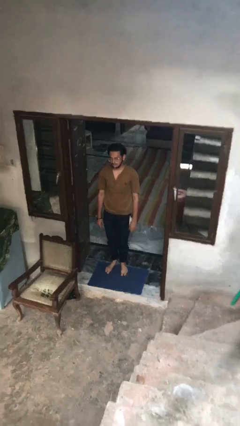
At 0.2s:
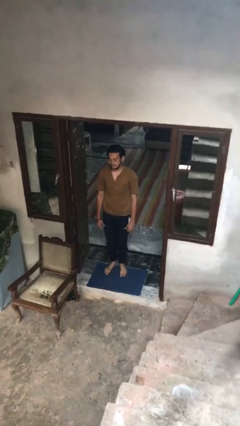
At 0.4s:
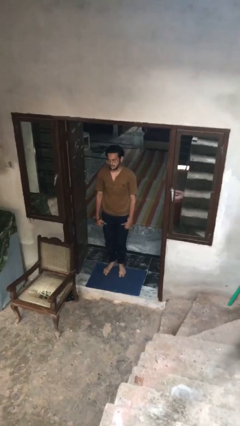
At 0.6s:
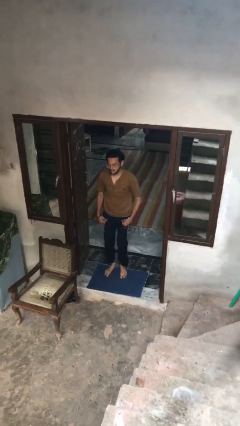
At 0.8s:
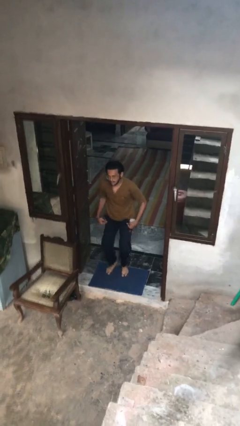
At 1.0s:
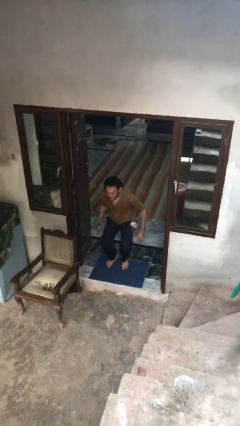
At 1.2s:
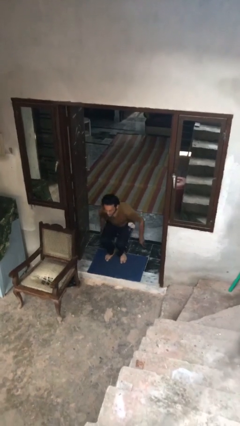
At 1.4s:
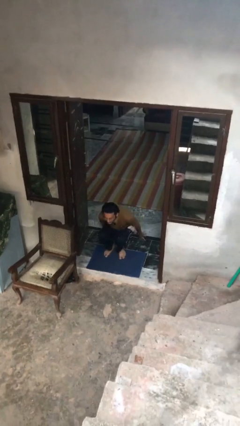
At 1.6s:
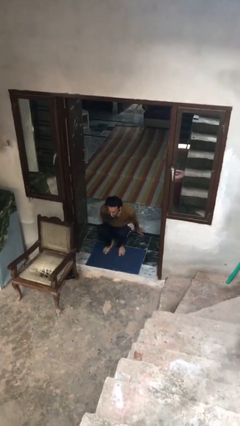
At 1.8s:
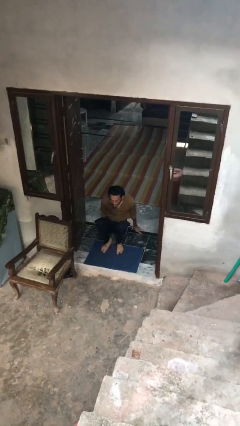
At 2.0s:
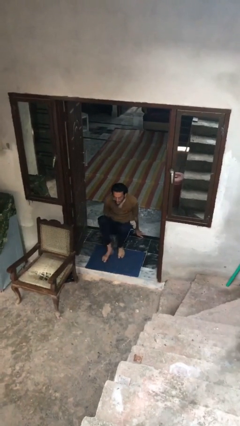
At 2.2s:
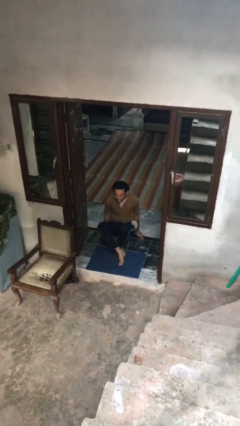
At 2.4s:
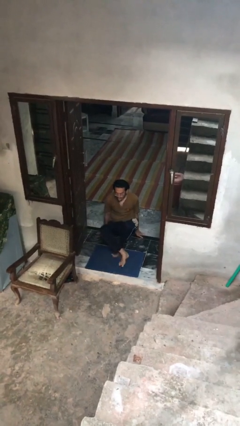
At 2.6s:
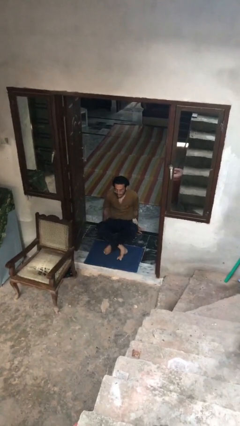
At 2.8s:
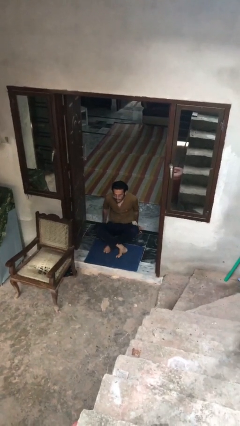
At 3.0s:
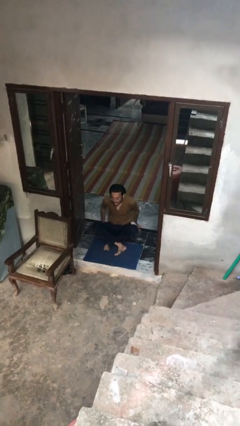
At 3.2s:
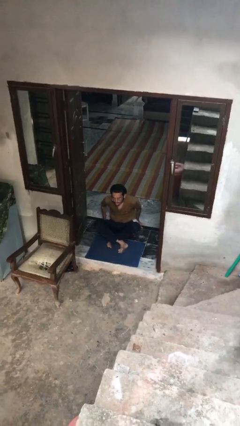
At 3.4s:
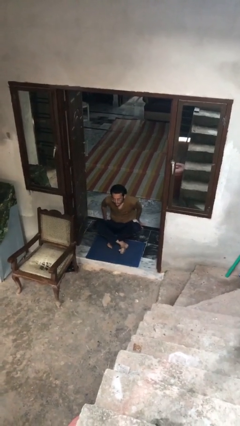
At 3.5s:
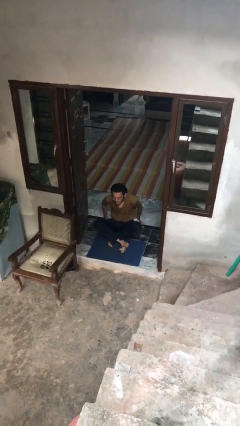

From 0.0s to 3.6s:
person sits crisscross

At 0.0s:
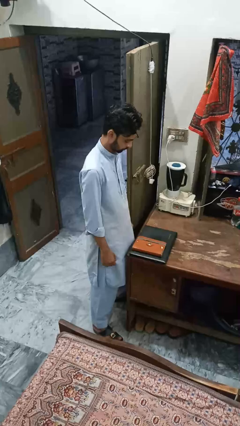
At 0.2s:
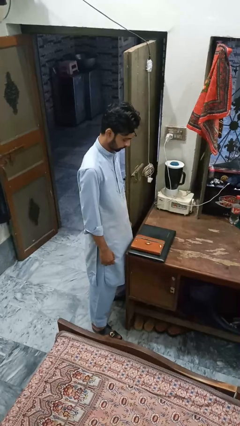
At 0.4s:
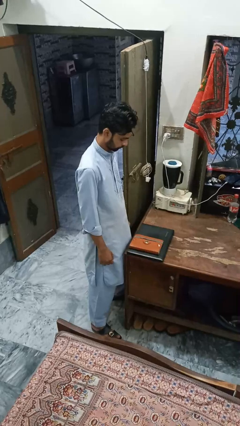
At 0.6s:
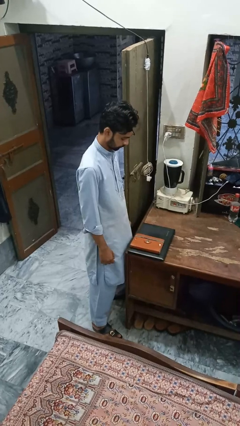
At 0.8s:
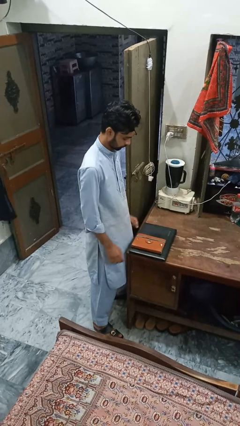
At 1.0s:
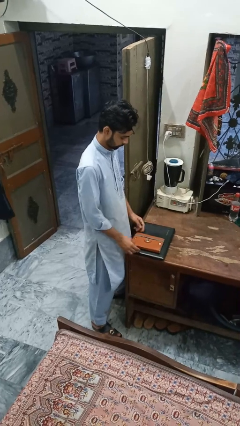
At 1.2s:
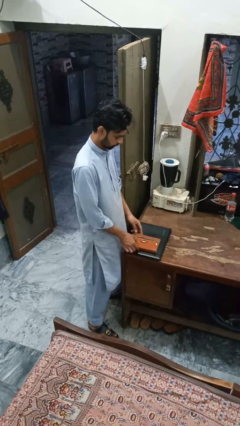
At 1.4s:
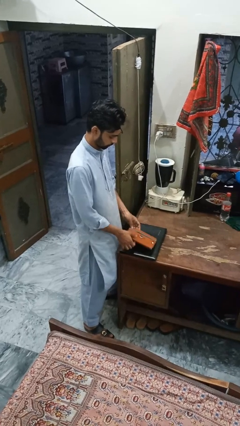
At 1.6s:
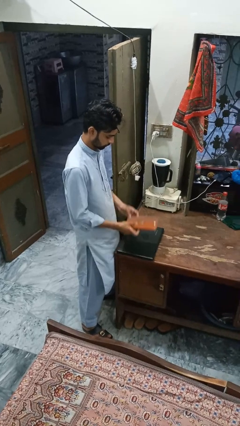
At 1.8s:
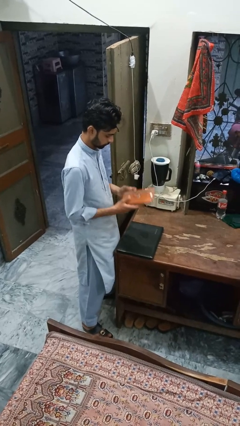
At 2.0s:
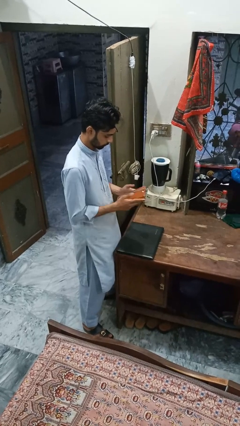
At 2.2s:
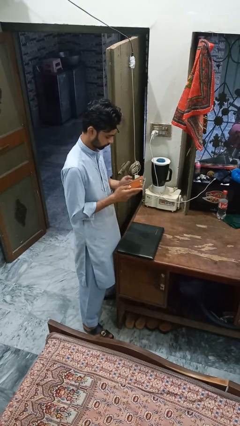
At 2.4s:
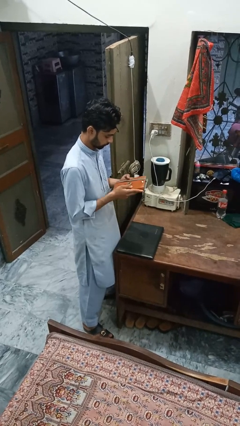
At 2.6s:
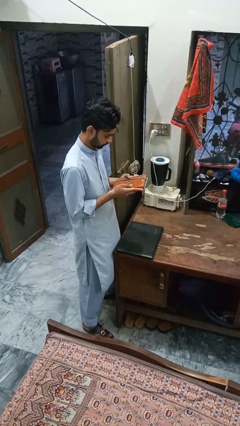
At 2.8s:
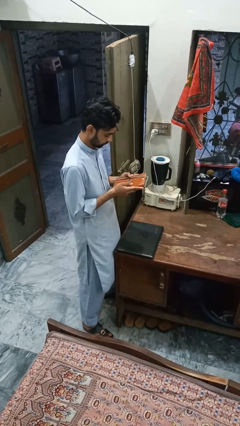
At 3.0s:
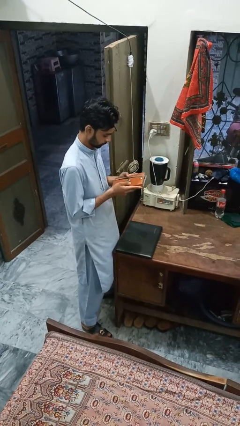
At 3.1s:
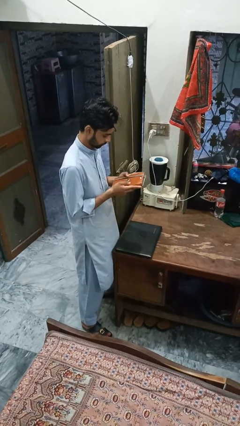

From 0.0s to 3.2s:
person picks up object from countertop

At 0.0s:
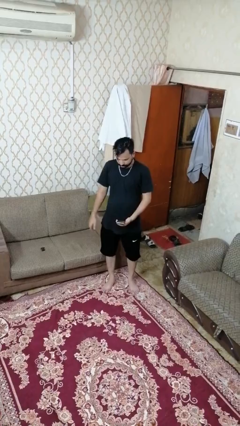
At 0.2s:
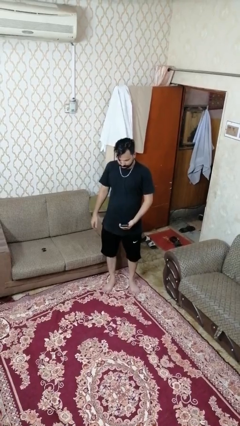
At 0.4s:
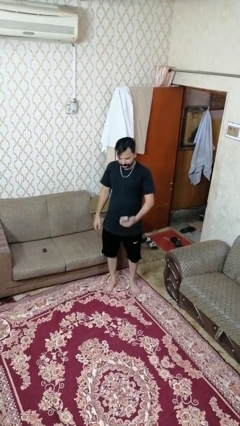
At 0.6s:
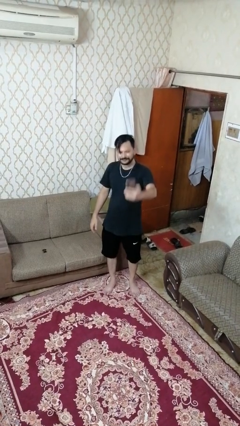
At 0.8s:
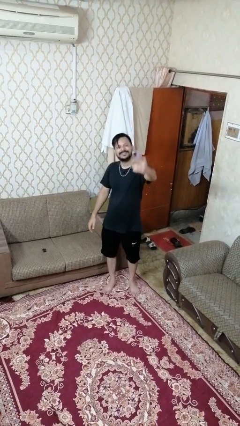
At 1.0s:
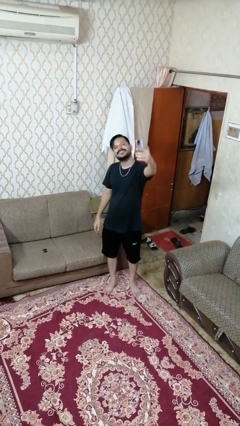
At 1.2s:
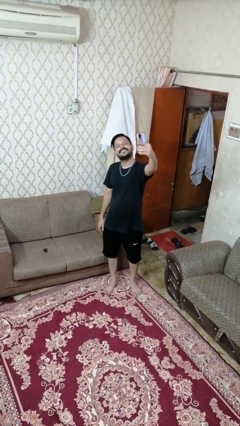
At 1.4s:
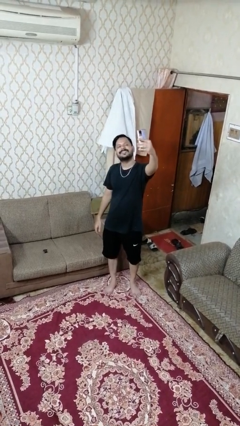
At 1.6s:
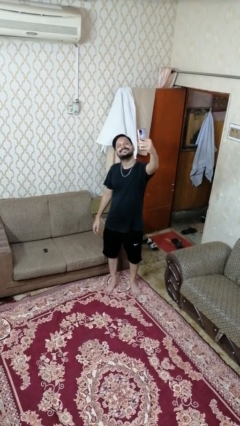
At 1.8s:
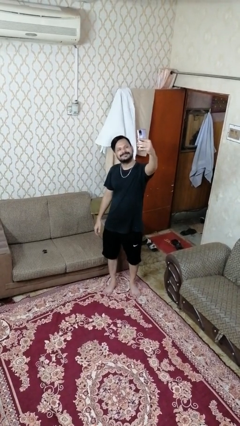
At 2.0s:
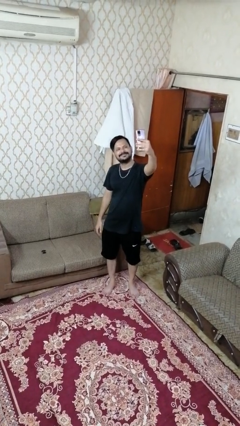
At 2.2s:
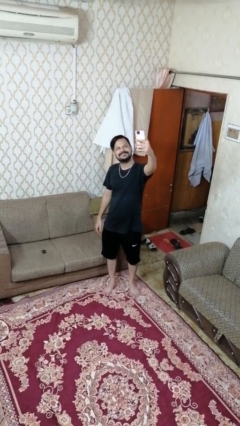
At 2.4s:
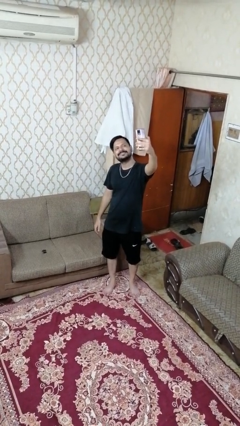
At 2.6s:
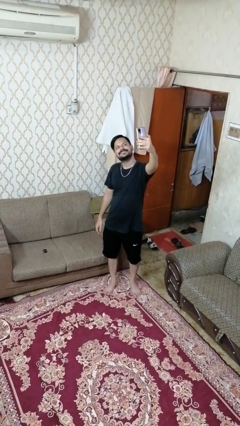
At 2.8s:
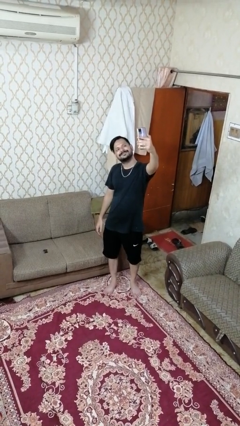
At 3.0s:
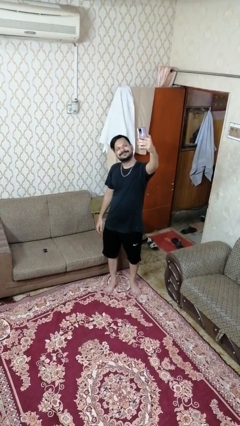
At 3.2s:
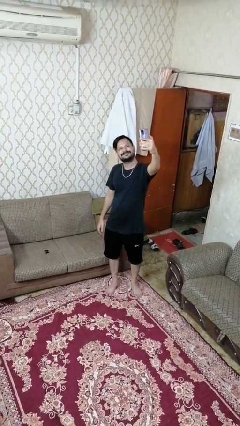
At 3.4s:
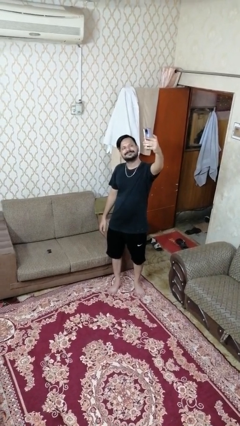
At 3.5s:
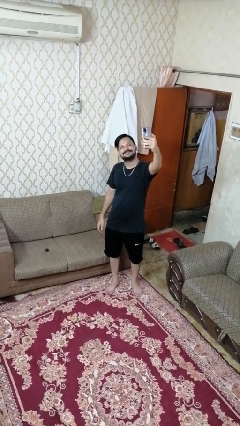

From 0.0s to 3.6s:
person takes selfie

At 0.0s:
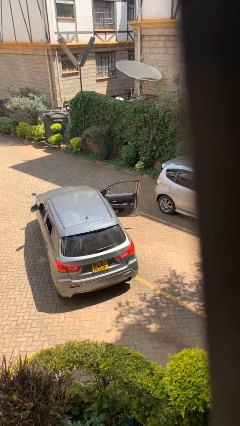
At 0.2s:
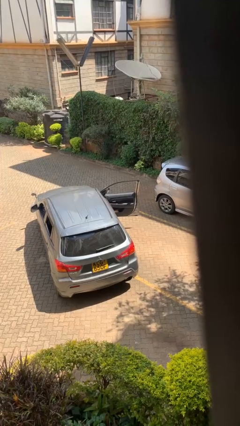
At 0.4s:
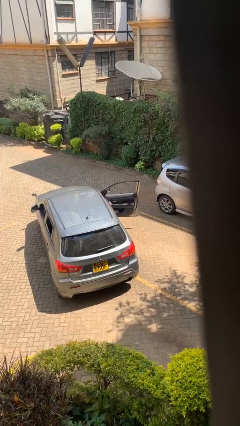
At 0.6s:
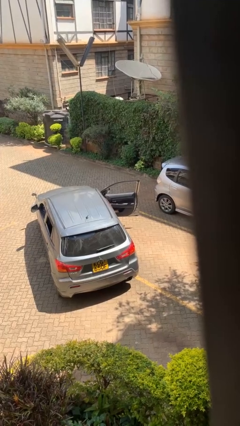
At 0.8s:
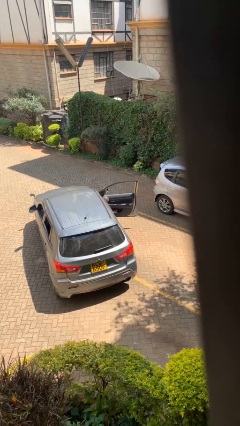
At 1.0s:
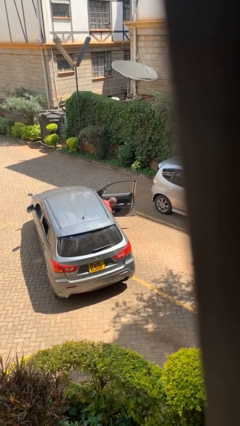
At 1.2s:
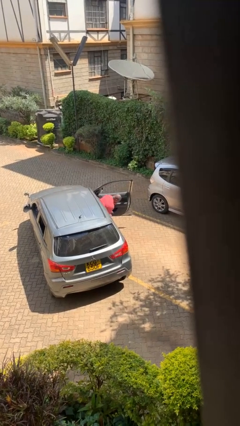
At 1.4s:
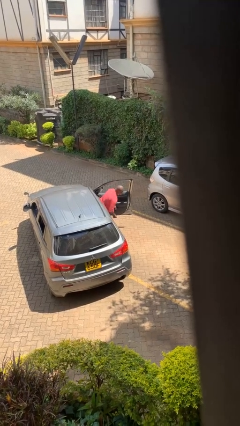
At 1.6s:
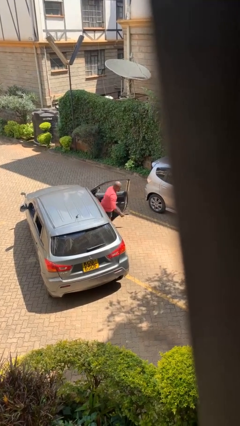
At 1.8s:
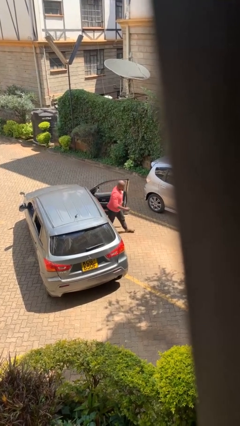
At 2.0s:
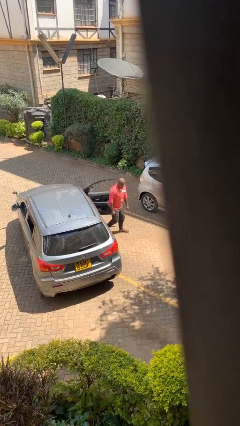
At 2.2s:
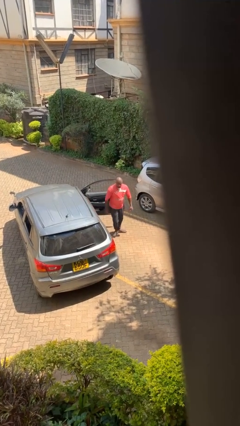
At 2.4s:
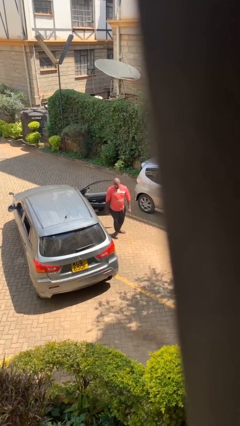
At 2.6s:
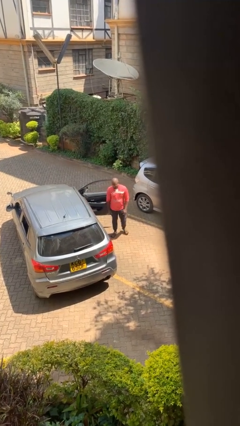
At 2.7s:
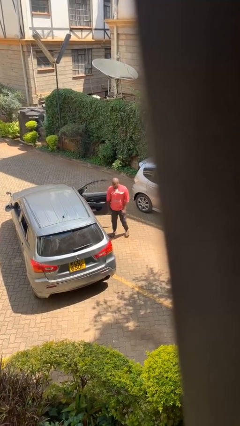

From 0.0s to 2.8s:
person exits car

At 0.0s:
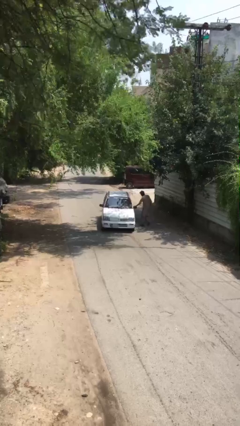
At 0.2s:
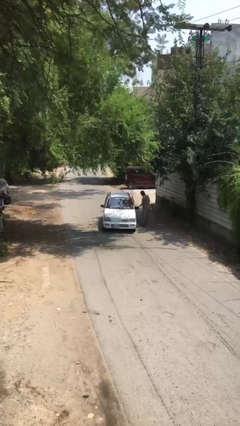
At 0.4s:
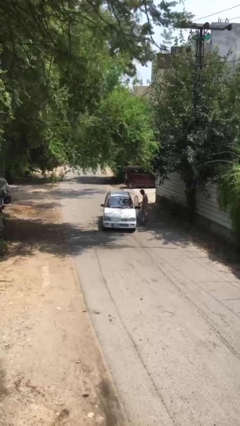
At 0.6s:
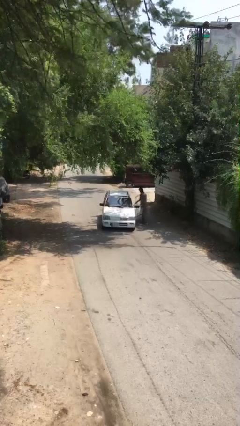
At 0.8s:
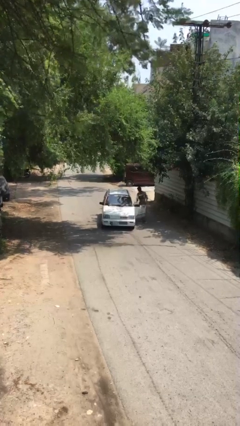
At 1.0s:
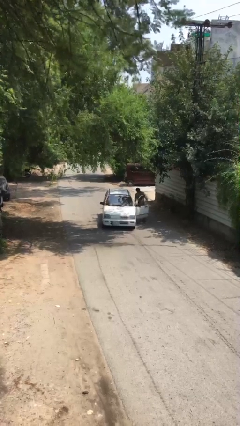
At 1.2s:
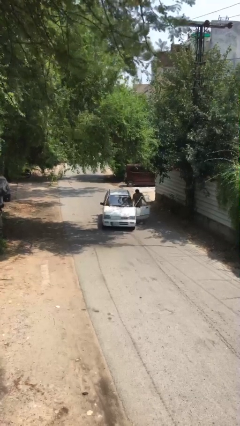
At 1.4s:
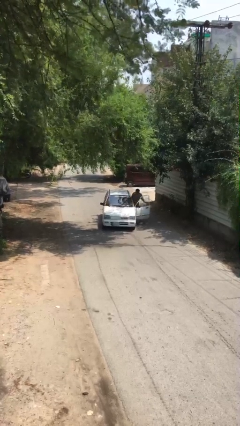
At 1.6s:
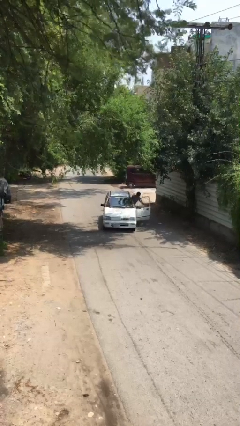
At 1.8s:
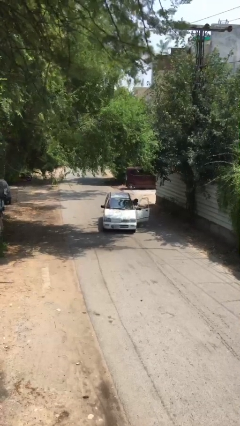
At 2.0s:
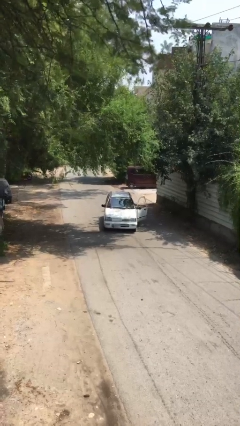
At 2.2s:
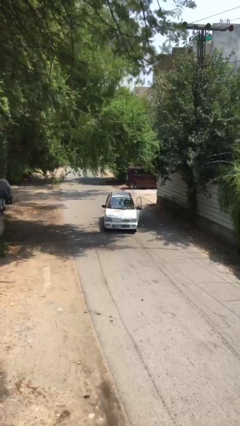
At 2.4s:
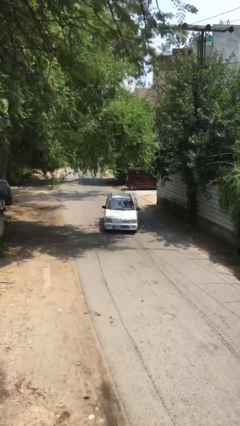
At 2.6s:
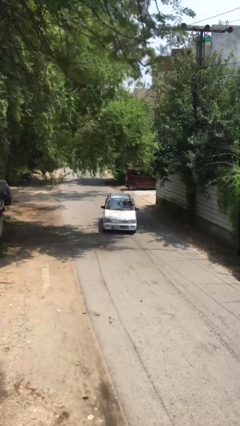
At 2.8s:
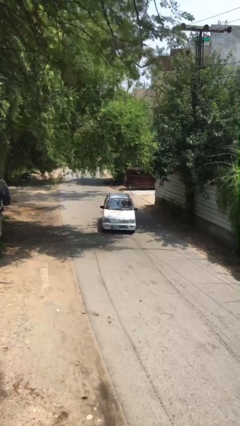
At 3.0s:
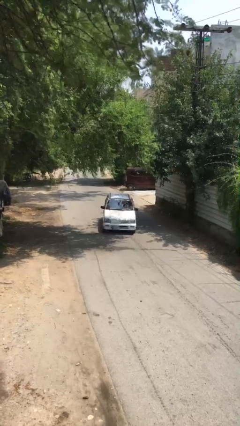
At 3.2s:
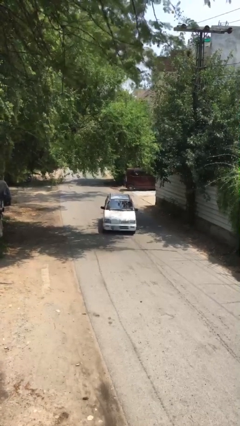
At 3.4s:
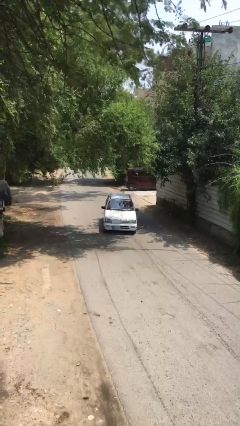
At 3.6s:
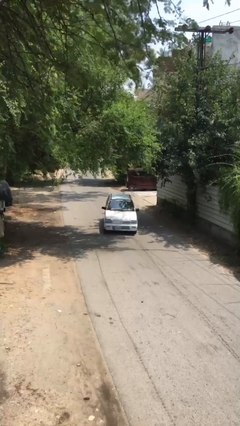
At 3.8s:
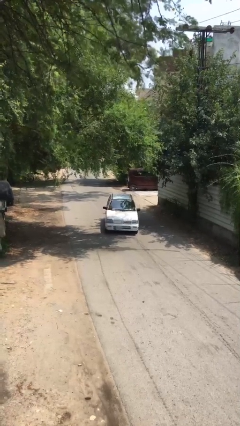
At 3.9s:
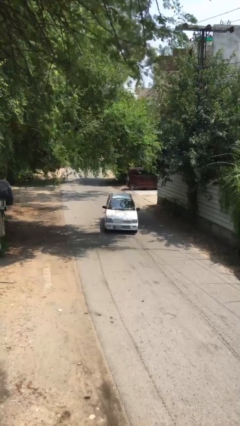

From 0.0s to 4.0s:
car picks up person

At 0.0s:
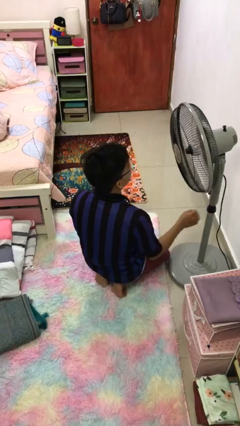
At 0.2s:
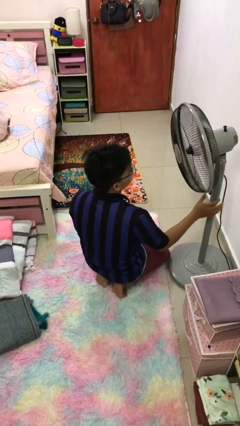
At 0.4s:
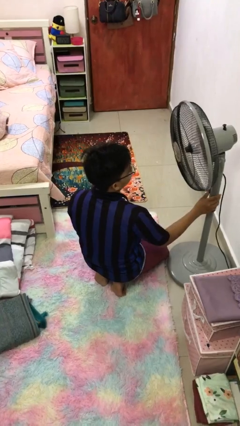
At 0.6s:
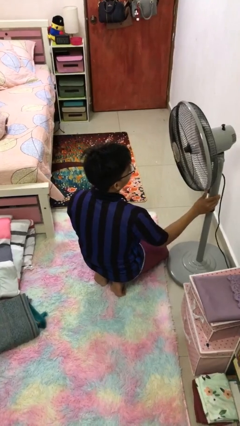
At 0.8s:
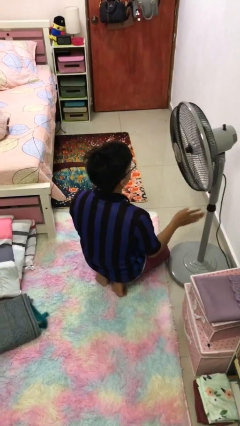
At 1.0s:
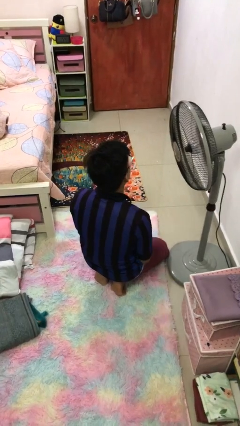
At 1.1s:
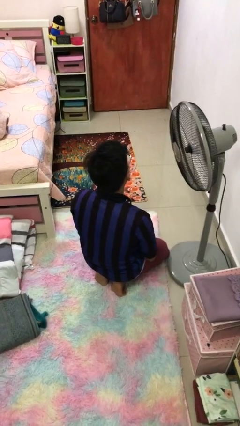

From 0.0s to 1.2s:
person turns off fan
